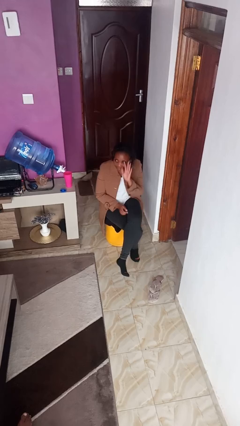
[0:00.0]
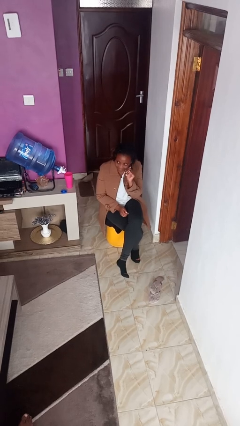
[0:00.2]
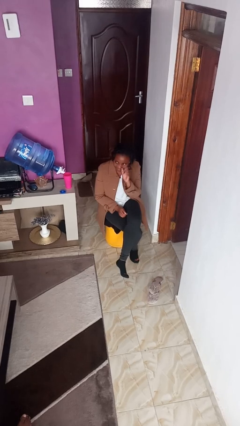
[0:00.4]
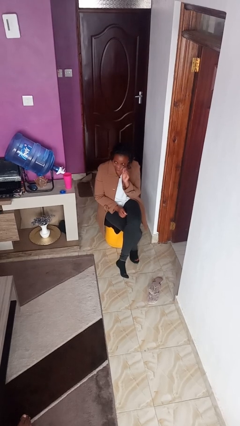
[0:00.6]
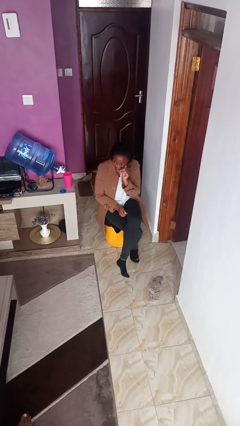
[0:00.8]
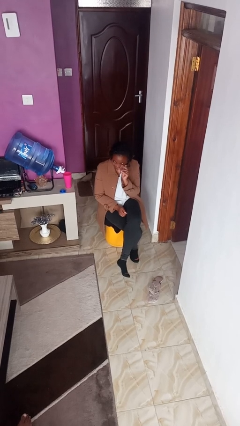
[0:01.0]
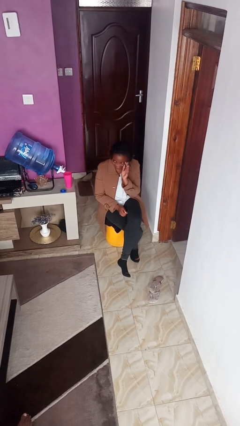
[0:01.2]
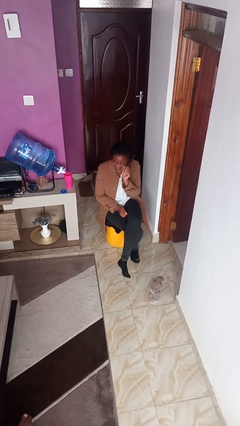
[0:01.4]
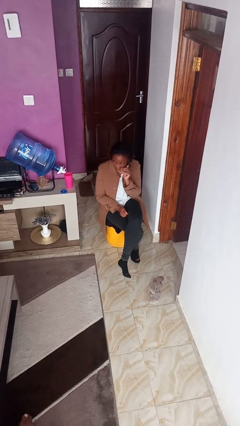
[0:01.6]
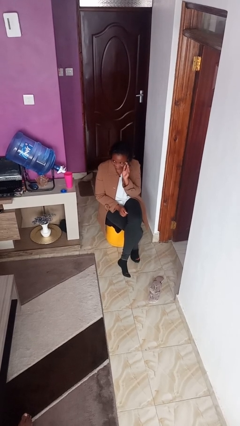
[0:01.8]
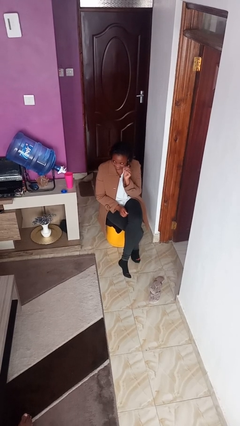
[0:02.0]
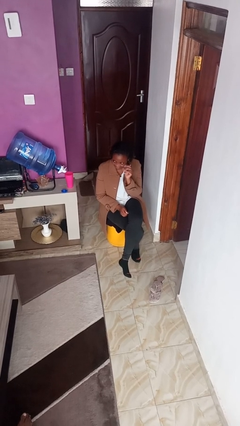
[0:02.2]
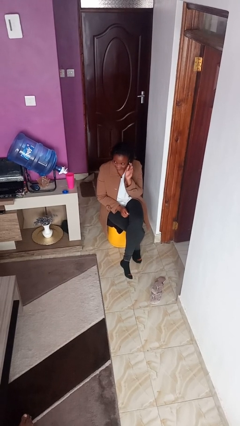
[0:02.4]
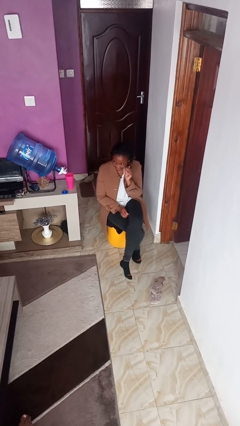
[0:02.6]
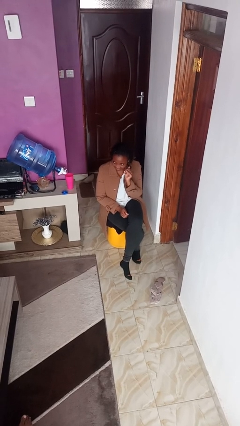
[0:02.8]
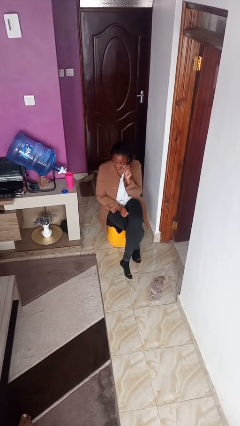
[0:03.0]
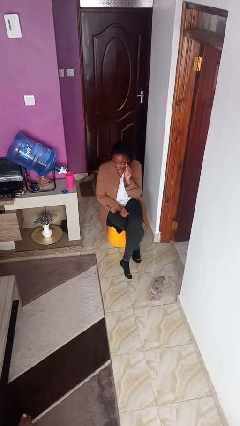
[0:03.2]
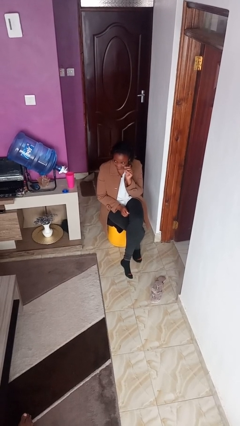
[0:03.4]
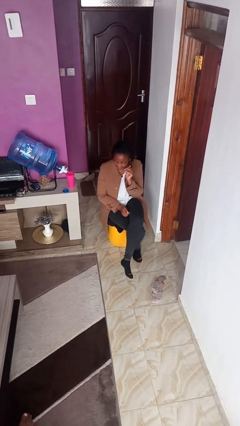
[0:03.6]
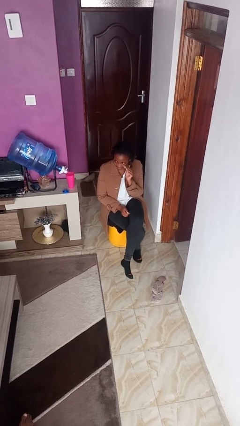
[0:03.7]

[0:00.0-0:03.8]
person gestures come here

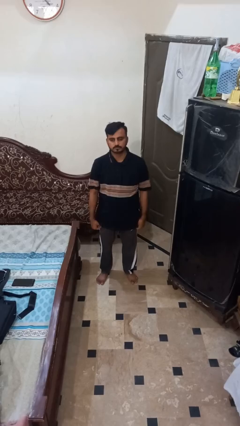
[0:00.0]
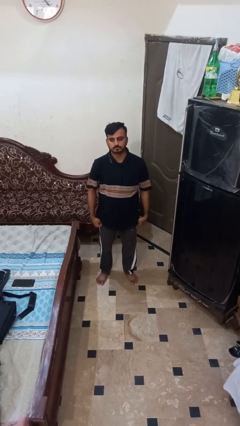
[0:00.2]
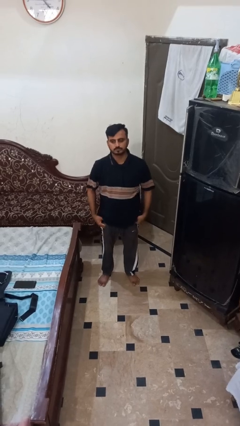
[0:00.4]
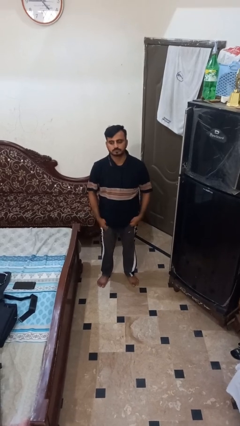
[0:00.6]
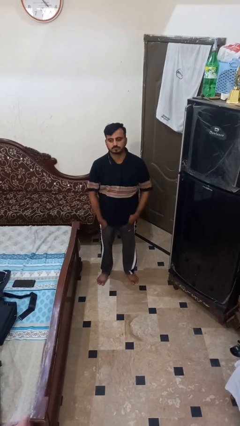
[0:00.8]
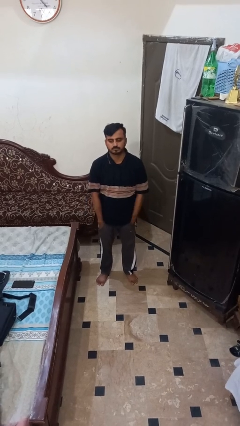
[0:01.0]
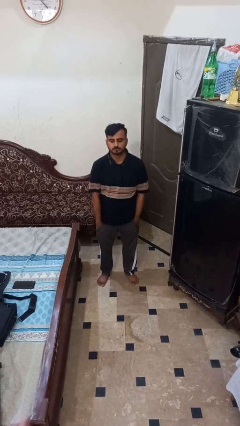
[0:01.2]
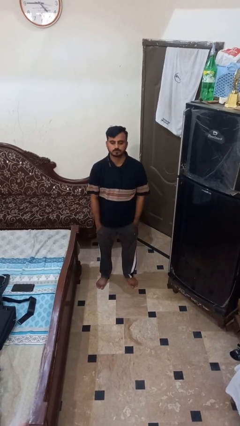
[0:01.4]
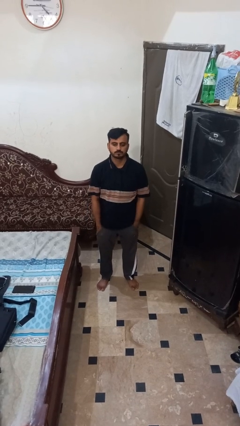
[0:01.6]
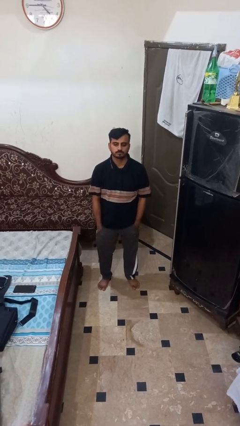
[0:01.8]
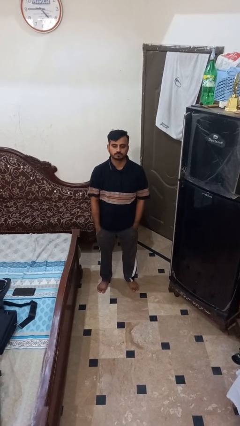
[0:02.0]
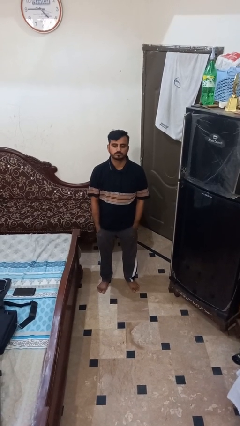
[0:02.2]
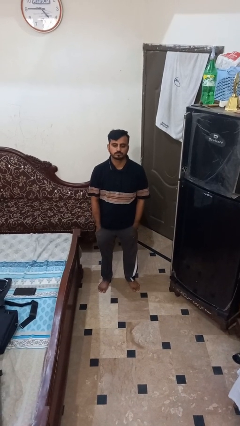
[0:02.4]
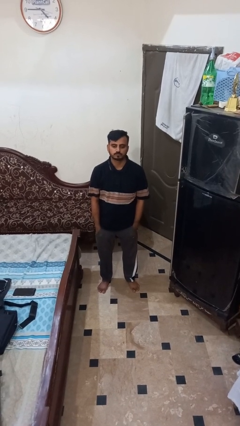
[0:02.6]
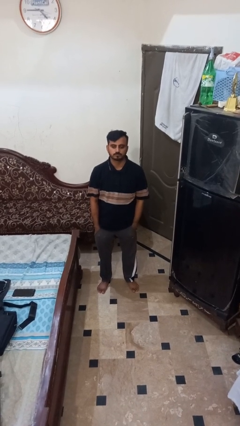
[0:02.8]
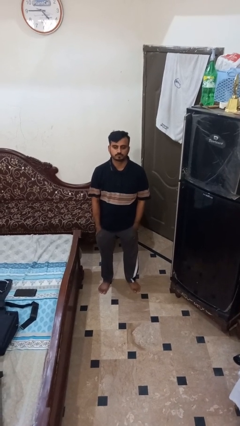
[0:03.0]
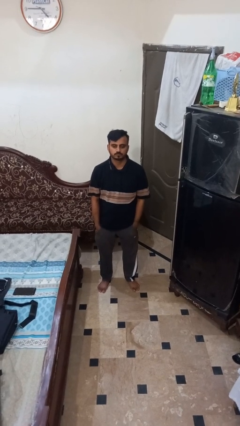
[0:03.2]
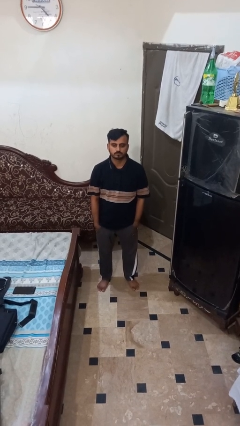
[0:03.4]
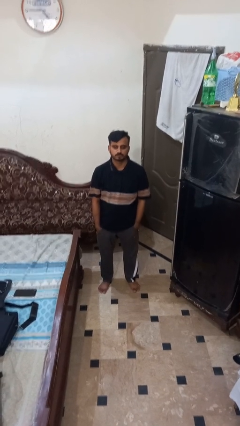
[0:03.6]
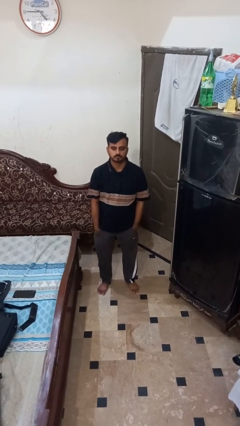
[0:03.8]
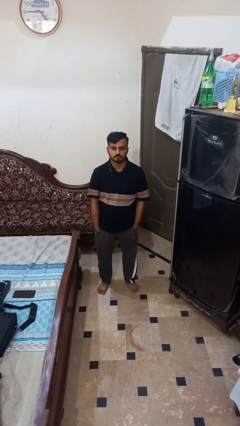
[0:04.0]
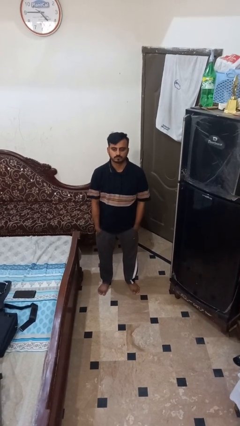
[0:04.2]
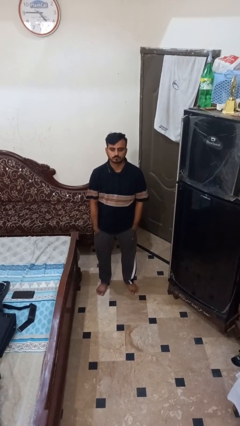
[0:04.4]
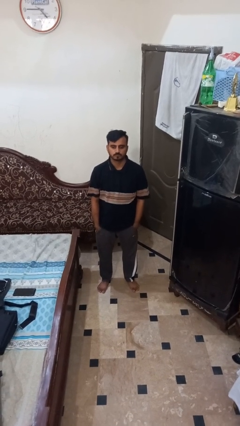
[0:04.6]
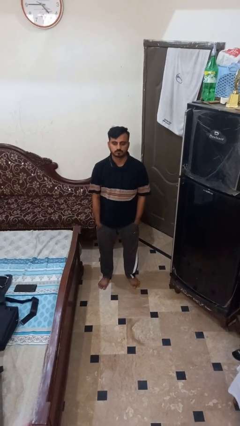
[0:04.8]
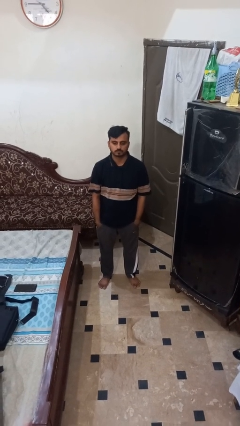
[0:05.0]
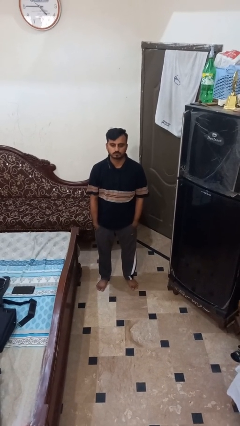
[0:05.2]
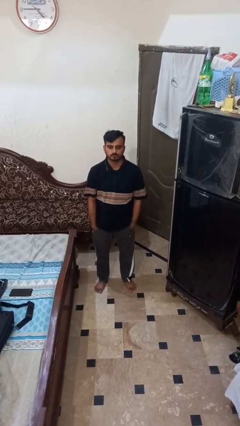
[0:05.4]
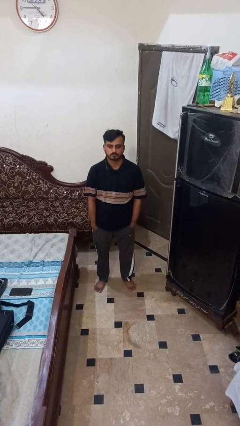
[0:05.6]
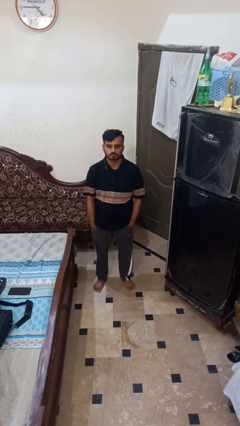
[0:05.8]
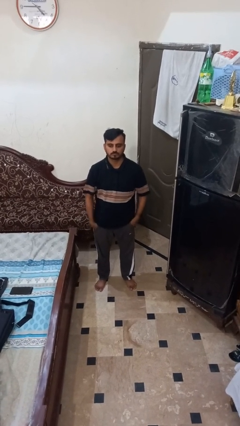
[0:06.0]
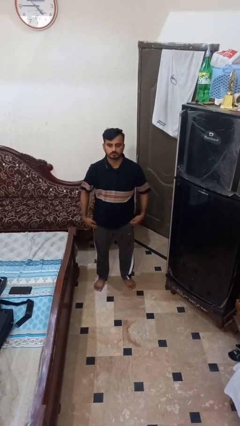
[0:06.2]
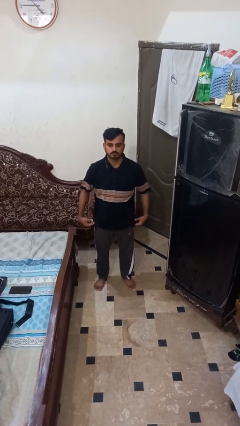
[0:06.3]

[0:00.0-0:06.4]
person puts hands in back pockets

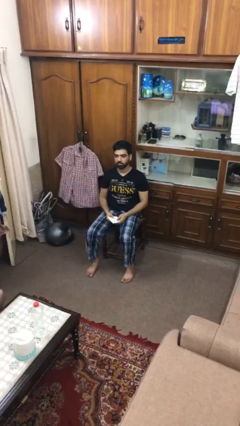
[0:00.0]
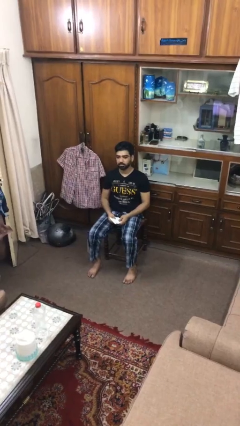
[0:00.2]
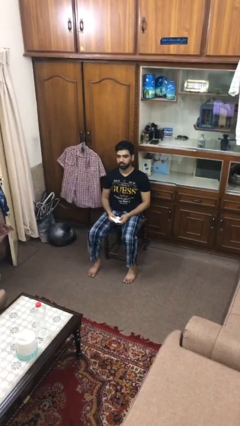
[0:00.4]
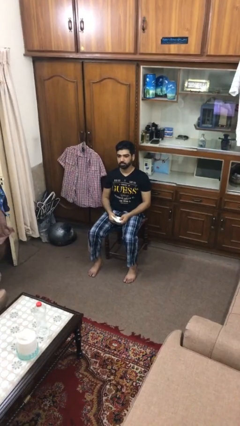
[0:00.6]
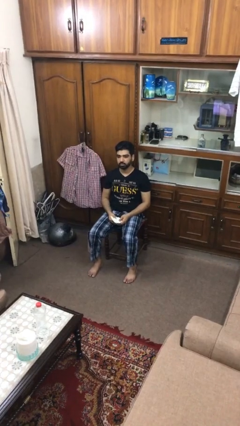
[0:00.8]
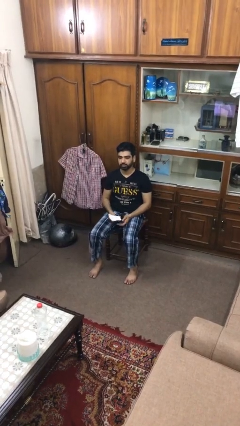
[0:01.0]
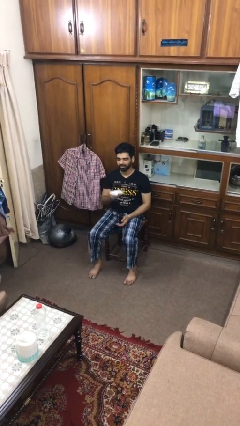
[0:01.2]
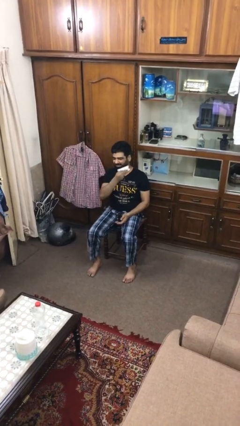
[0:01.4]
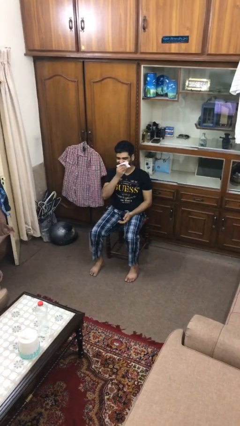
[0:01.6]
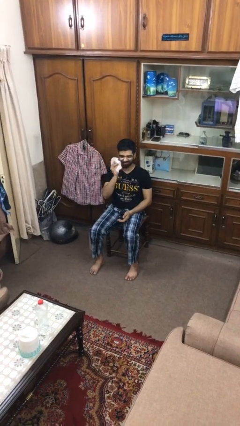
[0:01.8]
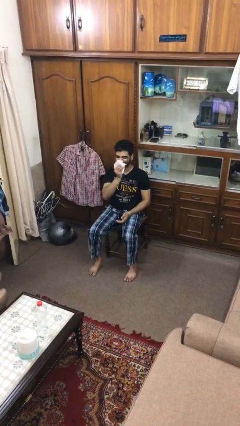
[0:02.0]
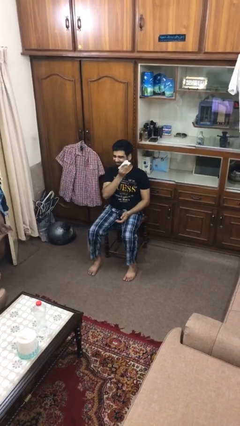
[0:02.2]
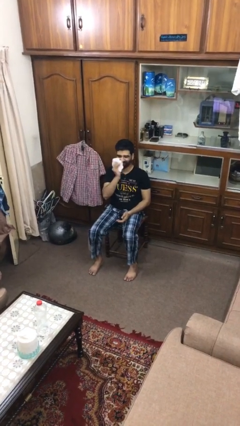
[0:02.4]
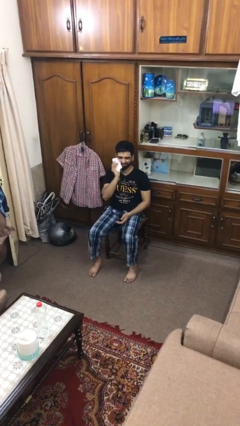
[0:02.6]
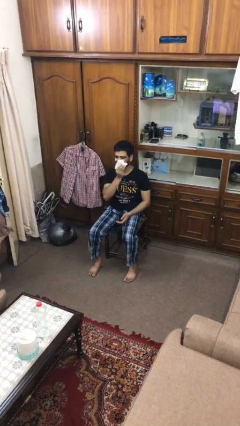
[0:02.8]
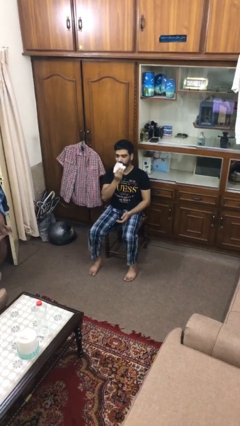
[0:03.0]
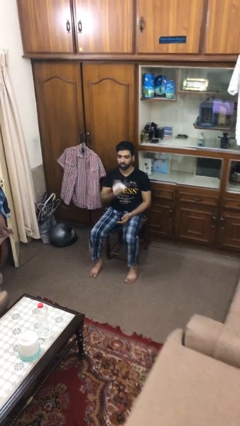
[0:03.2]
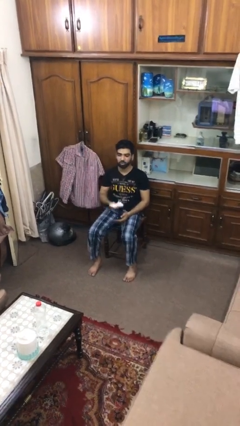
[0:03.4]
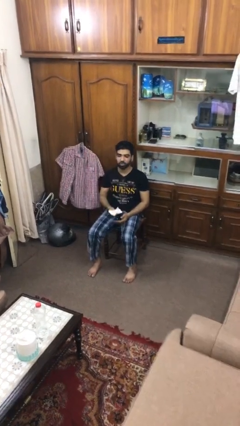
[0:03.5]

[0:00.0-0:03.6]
person wipes mouth with napkin

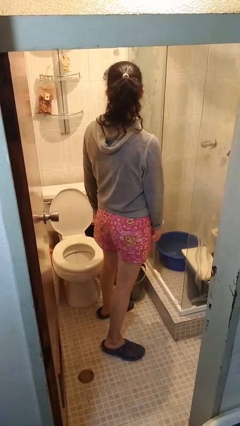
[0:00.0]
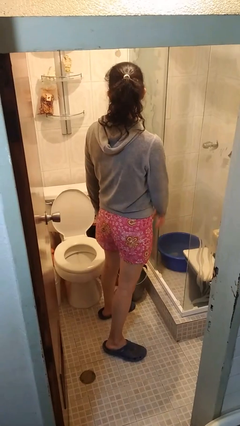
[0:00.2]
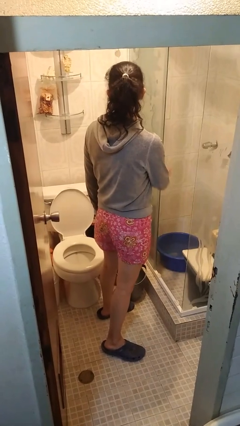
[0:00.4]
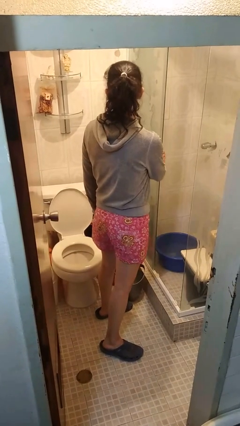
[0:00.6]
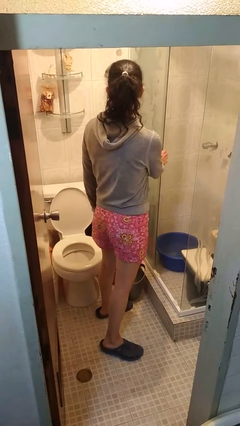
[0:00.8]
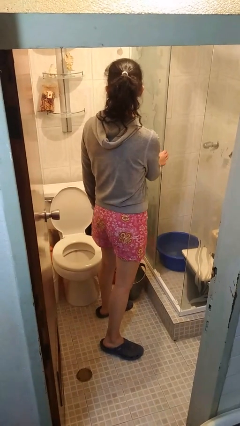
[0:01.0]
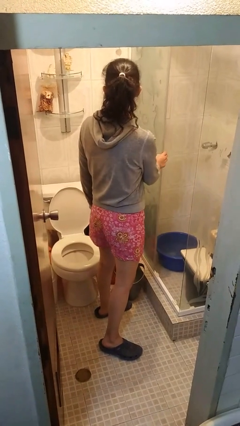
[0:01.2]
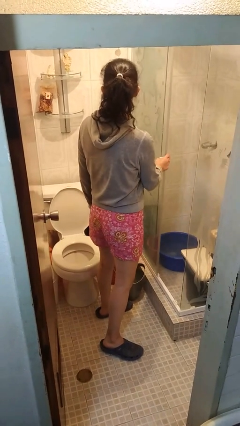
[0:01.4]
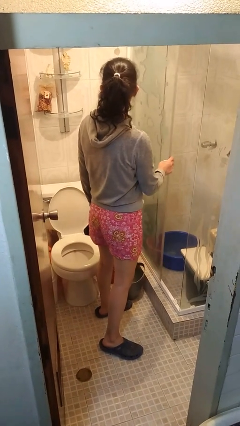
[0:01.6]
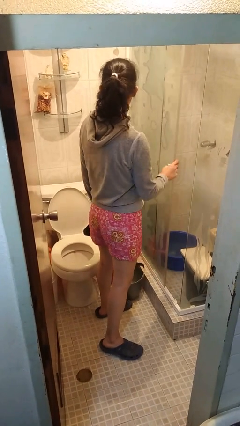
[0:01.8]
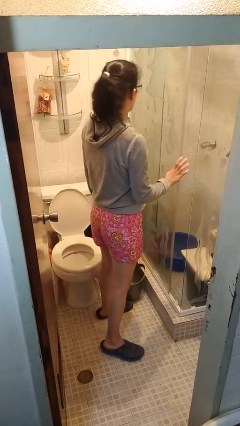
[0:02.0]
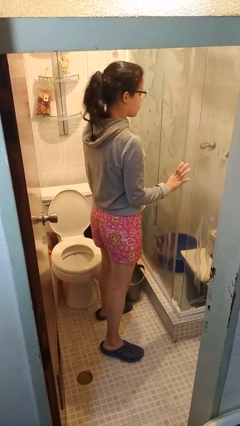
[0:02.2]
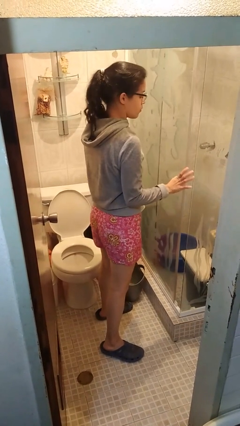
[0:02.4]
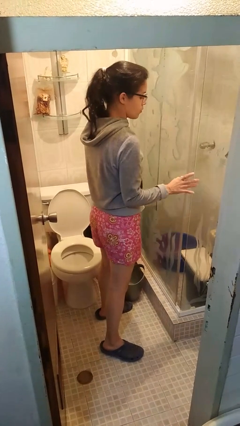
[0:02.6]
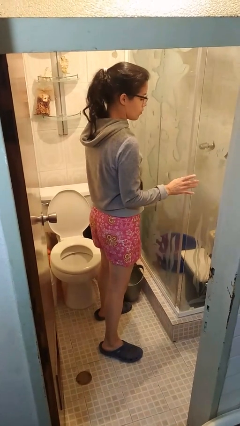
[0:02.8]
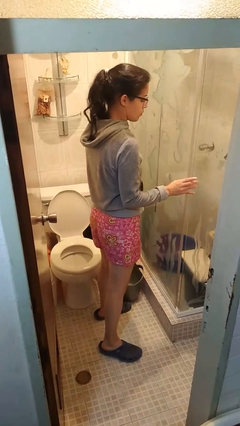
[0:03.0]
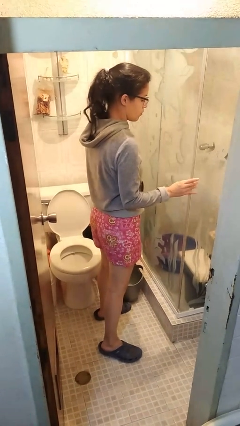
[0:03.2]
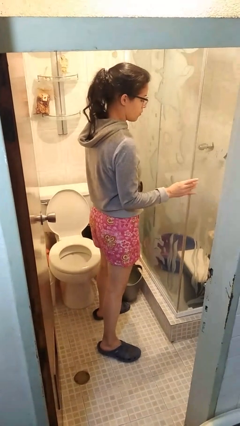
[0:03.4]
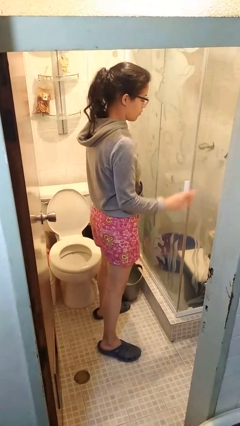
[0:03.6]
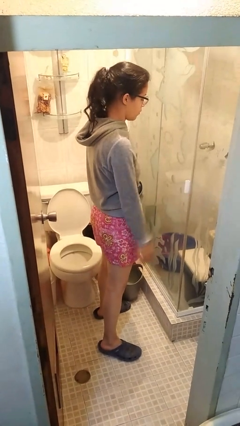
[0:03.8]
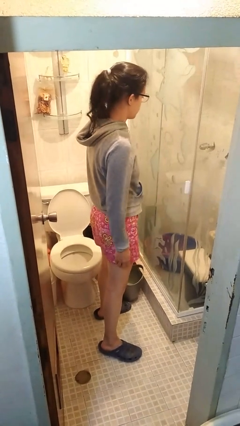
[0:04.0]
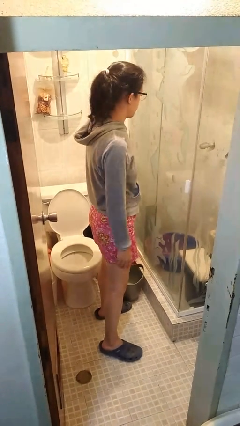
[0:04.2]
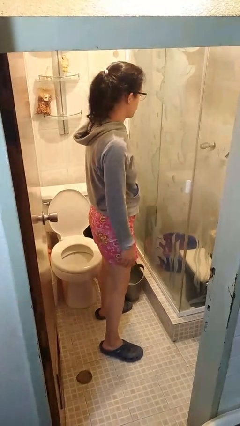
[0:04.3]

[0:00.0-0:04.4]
person closes sliding door
